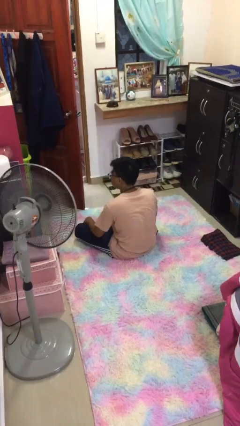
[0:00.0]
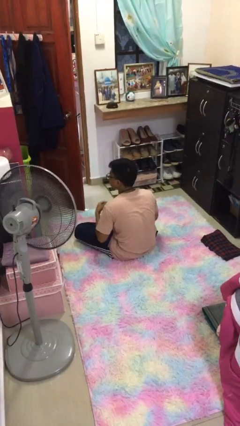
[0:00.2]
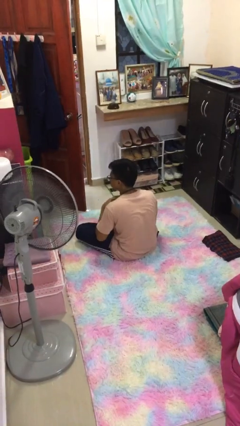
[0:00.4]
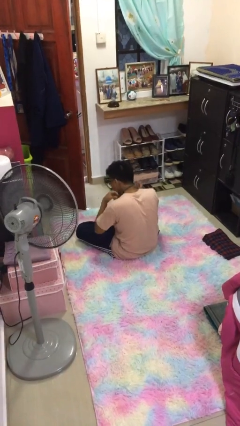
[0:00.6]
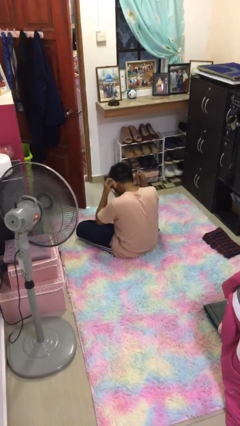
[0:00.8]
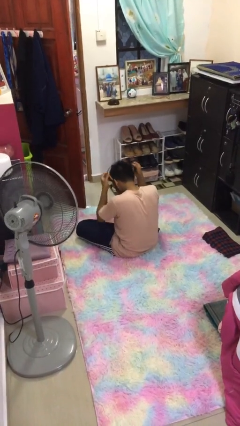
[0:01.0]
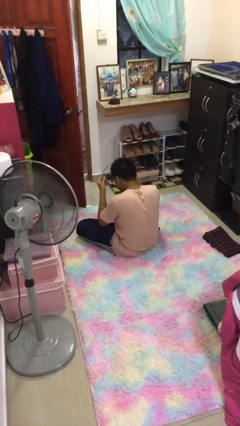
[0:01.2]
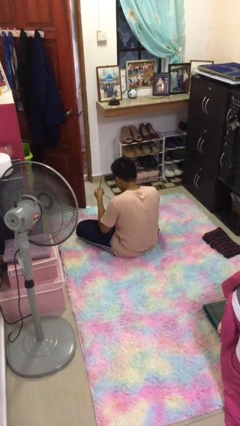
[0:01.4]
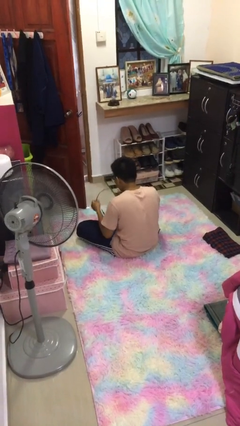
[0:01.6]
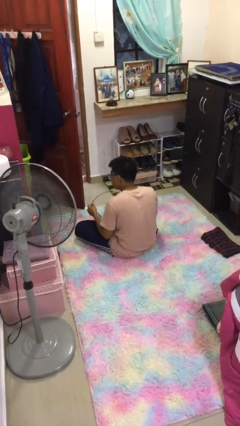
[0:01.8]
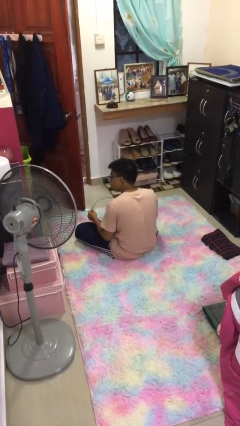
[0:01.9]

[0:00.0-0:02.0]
person takes off necklace

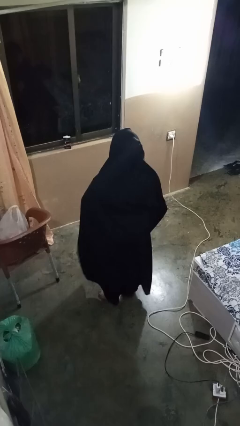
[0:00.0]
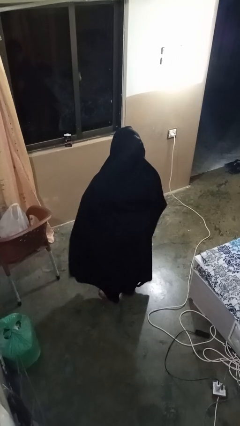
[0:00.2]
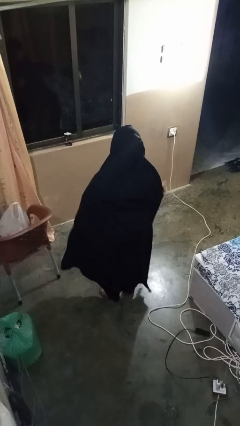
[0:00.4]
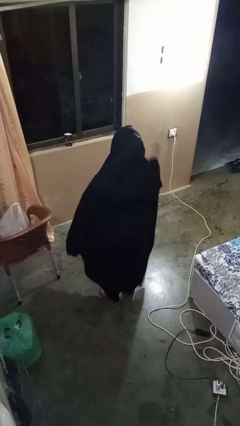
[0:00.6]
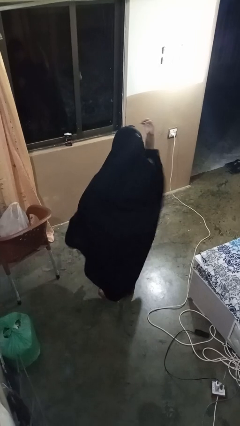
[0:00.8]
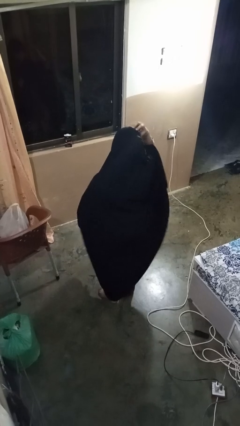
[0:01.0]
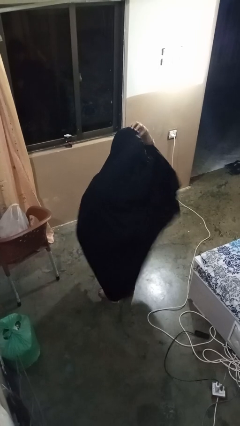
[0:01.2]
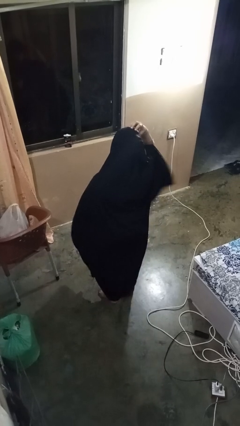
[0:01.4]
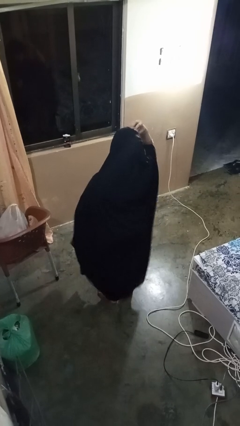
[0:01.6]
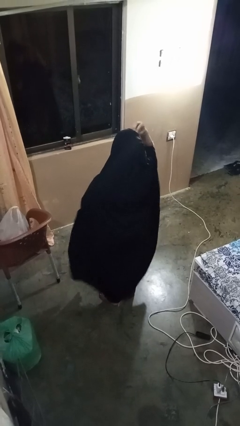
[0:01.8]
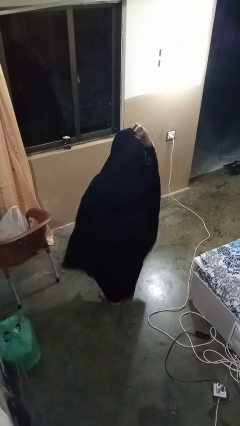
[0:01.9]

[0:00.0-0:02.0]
person scratches face

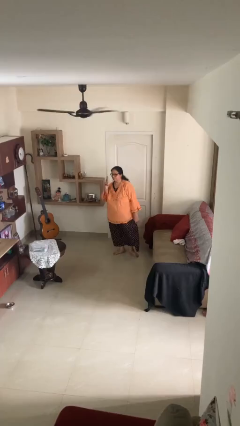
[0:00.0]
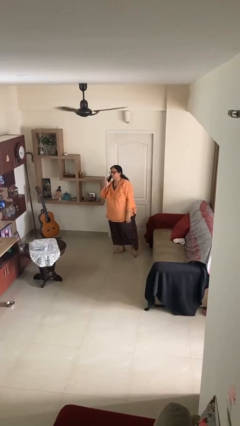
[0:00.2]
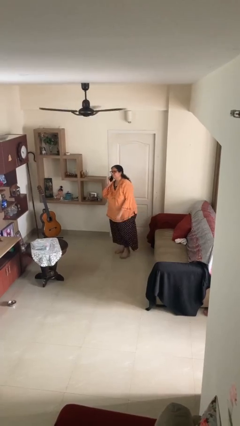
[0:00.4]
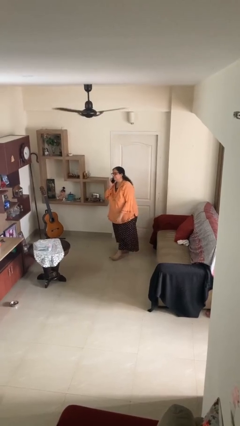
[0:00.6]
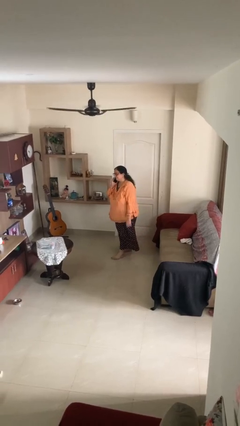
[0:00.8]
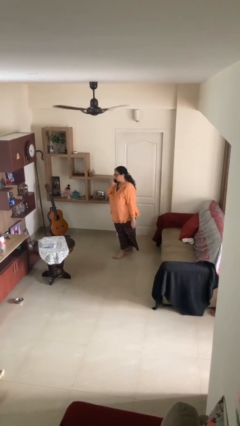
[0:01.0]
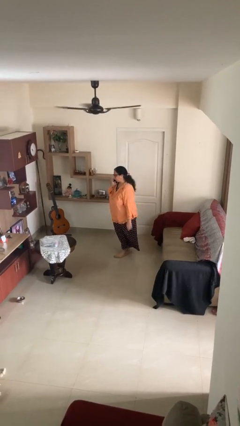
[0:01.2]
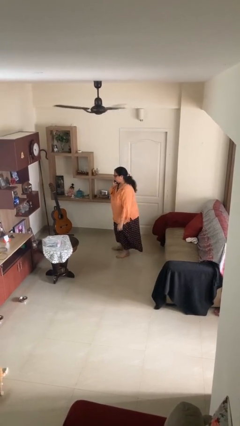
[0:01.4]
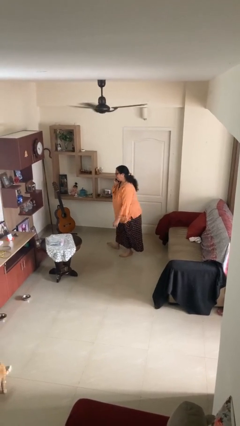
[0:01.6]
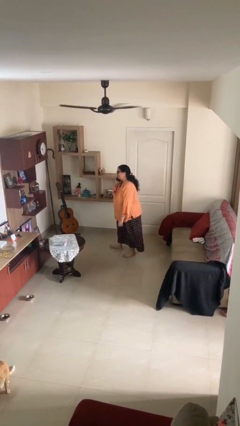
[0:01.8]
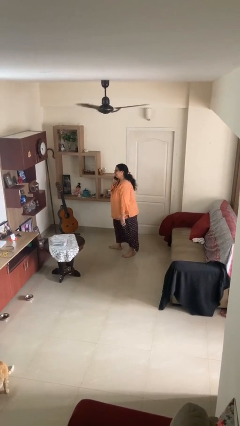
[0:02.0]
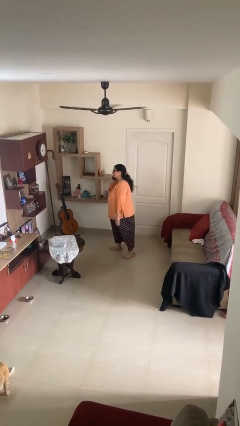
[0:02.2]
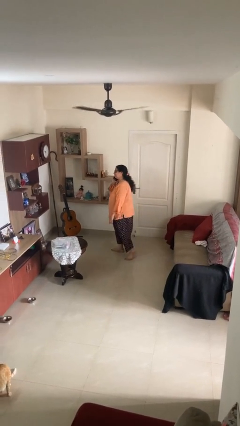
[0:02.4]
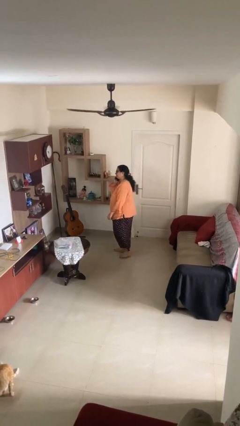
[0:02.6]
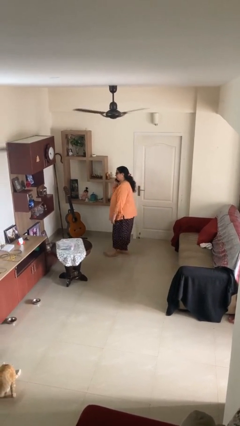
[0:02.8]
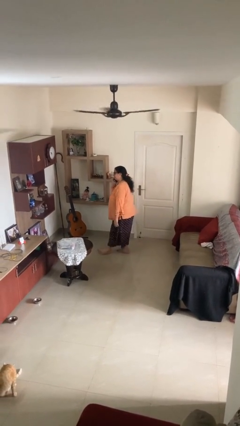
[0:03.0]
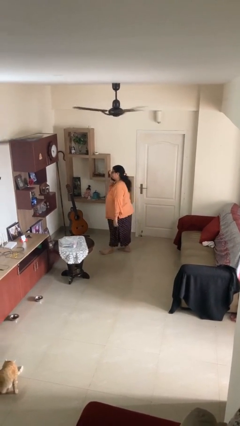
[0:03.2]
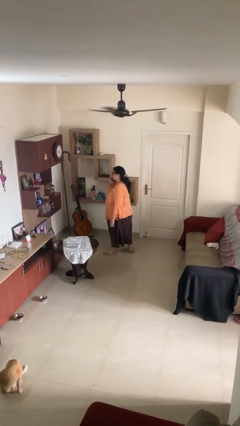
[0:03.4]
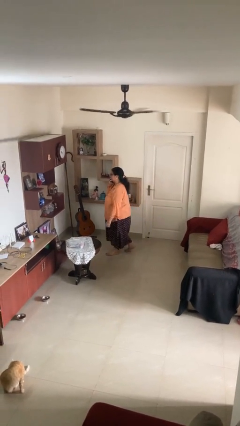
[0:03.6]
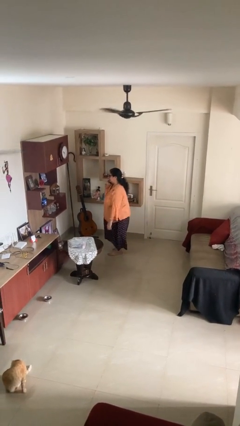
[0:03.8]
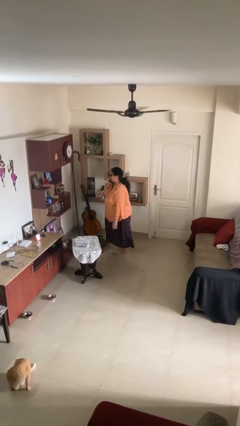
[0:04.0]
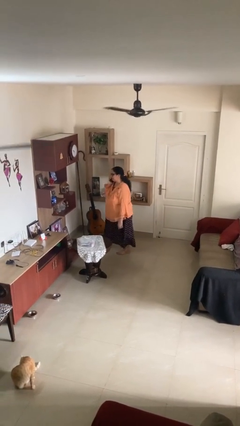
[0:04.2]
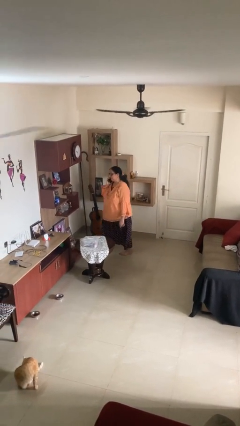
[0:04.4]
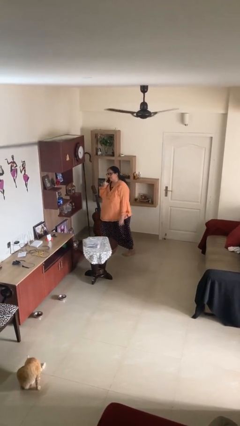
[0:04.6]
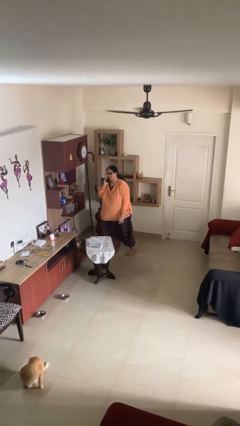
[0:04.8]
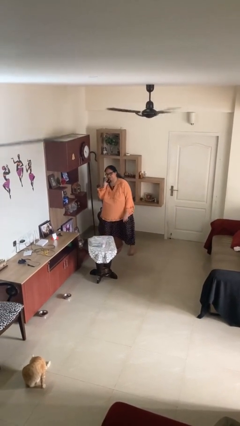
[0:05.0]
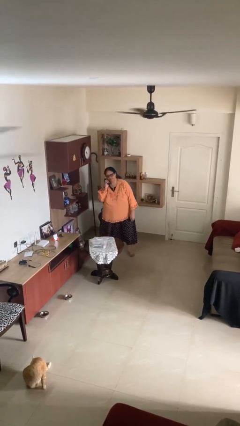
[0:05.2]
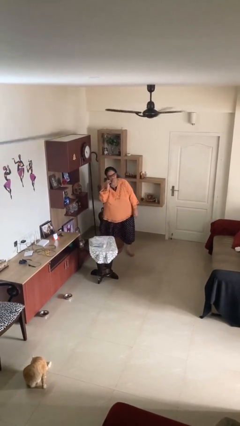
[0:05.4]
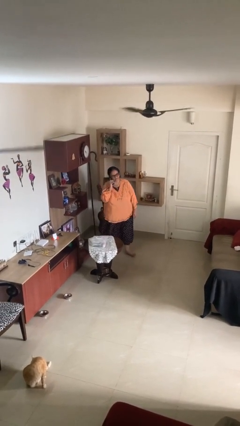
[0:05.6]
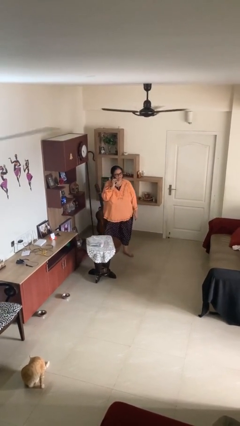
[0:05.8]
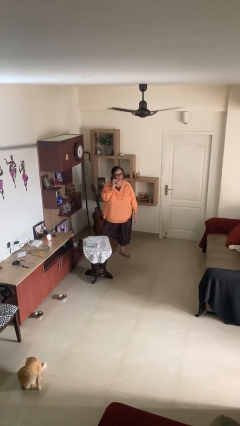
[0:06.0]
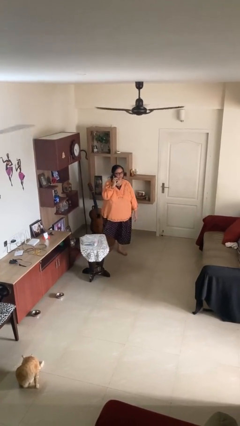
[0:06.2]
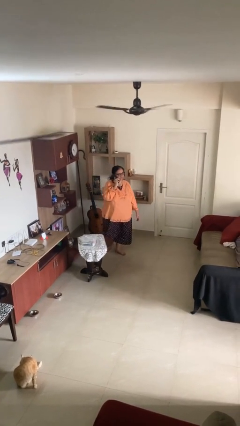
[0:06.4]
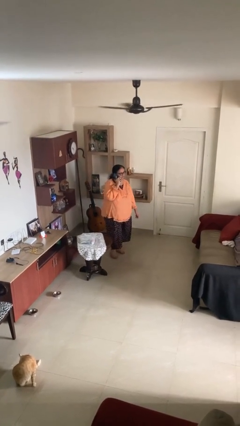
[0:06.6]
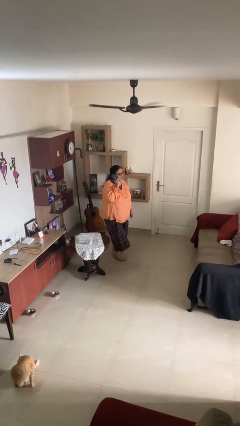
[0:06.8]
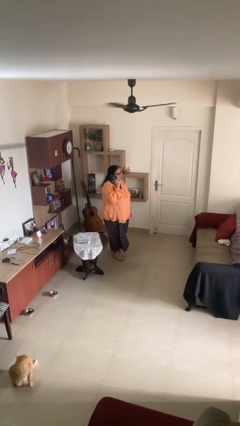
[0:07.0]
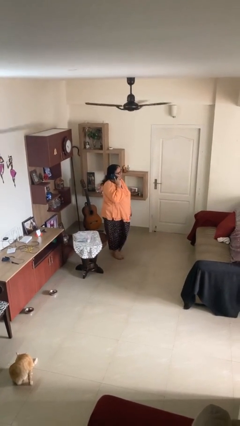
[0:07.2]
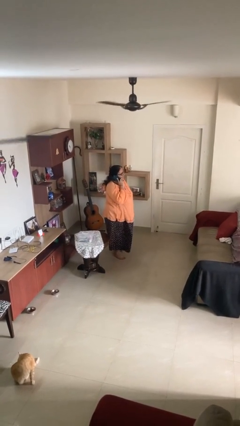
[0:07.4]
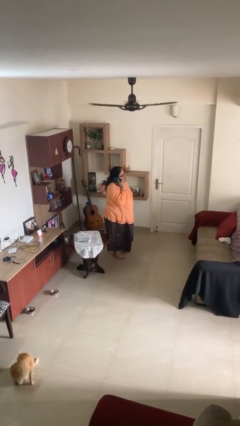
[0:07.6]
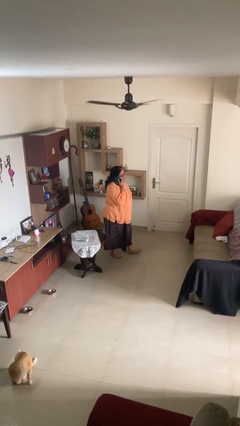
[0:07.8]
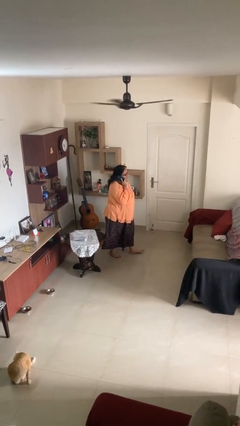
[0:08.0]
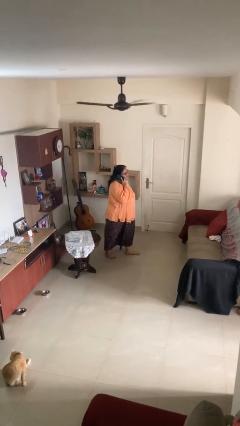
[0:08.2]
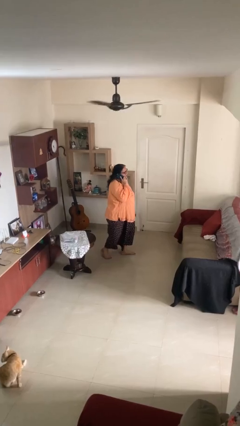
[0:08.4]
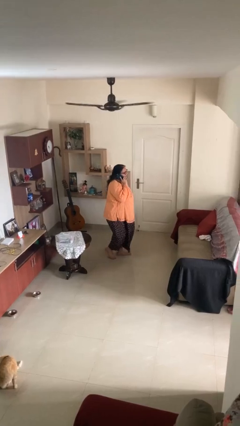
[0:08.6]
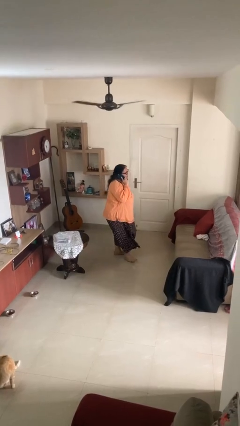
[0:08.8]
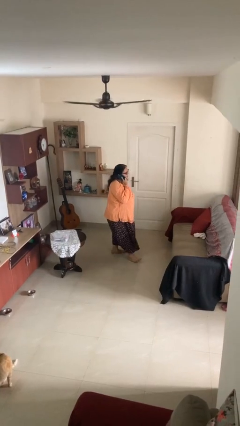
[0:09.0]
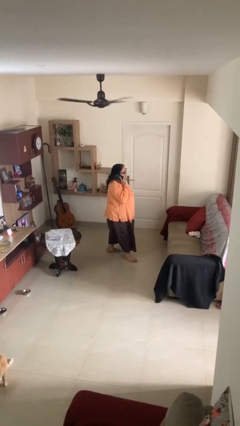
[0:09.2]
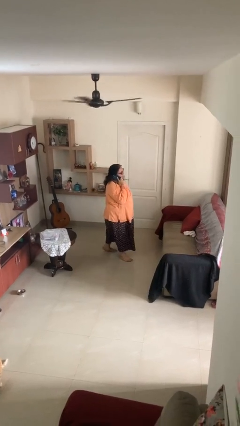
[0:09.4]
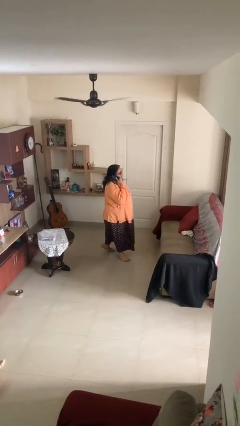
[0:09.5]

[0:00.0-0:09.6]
person talks on phone

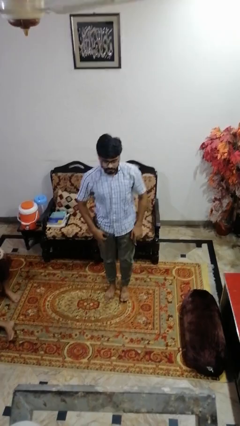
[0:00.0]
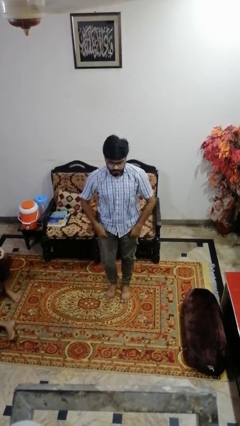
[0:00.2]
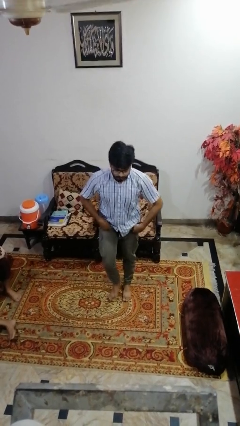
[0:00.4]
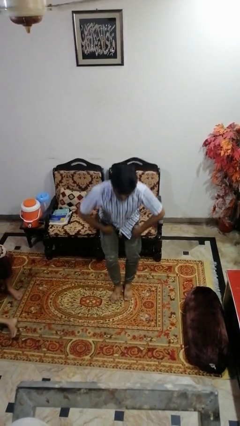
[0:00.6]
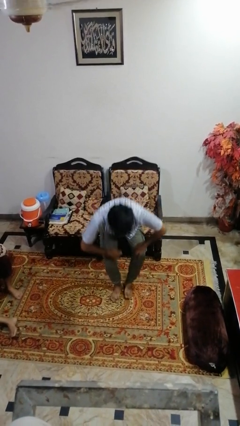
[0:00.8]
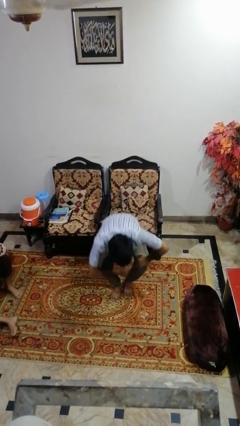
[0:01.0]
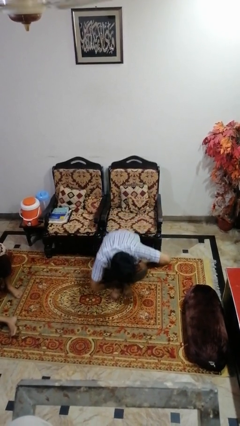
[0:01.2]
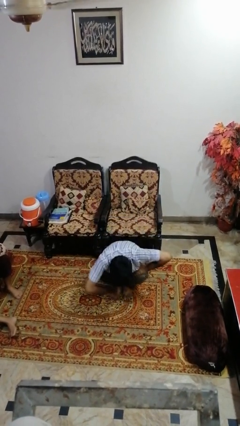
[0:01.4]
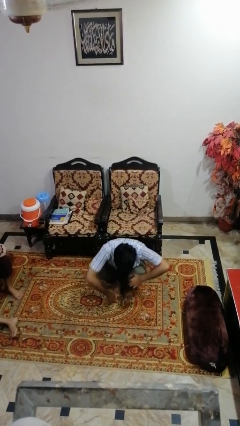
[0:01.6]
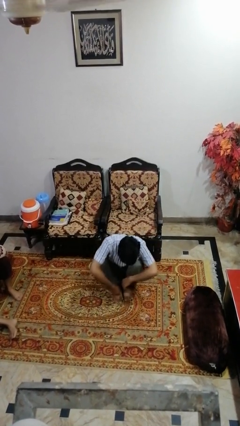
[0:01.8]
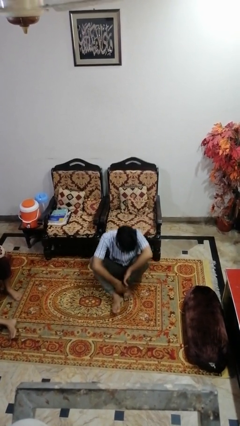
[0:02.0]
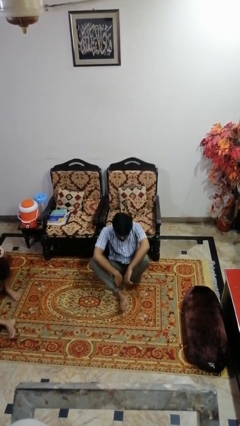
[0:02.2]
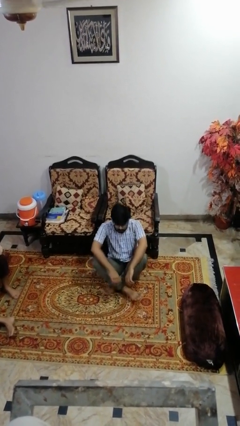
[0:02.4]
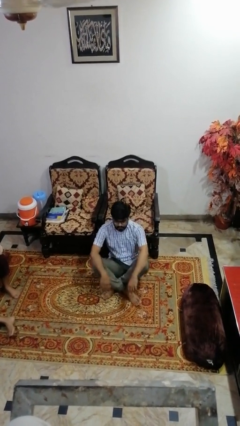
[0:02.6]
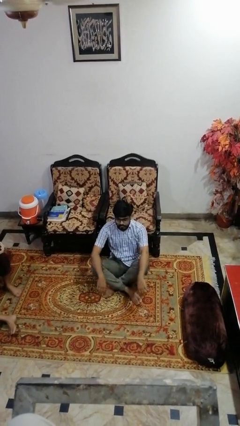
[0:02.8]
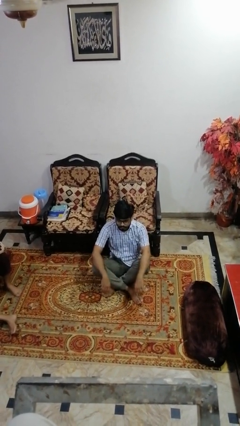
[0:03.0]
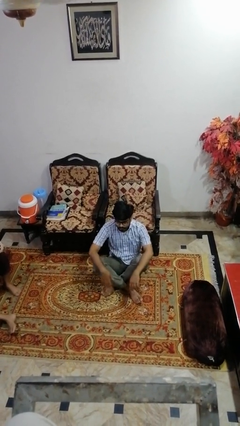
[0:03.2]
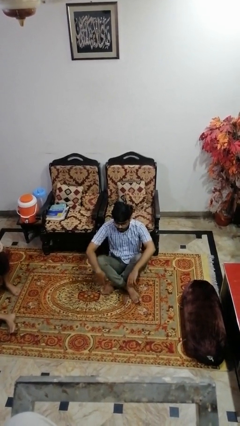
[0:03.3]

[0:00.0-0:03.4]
person sits crisscross

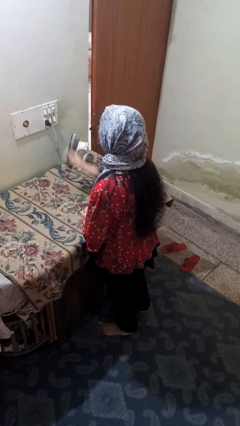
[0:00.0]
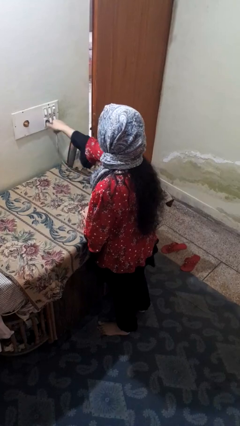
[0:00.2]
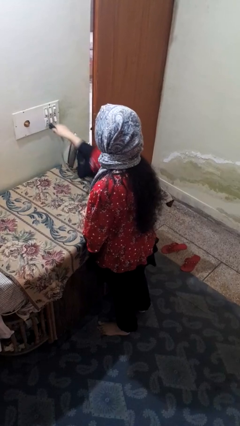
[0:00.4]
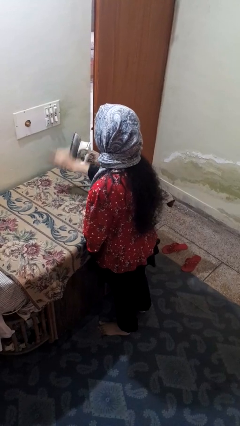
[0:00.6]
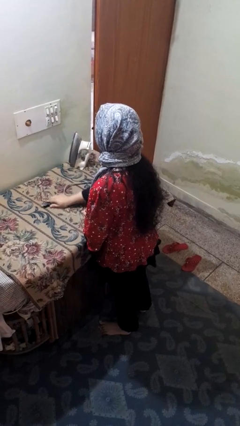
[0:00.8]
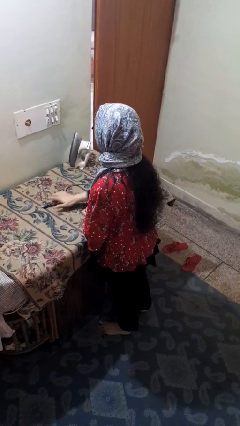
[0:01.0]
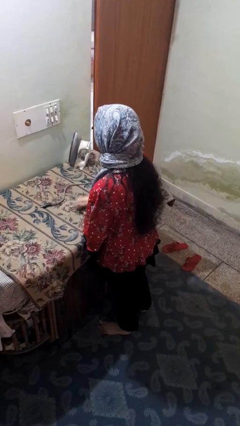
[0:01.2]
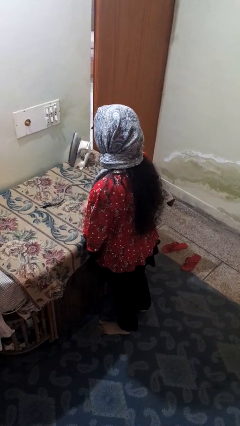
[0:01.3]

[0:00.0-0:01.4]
person unplugs from electrical socket
